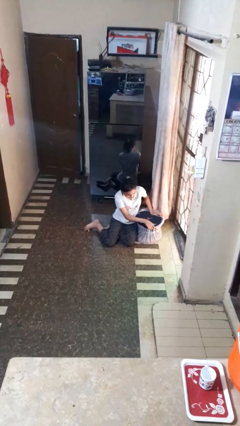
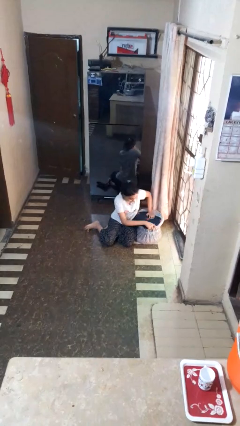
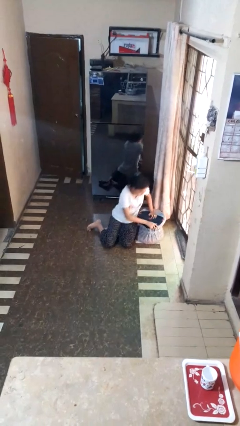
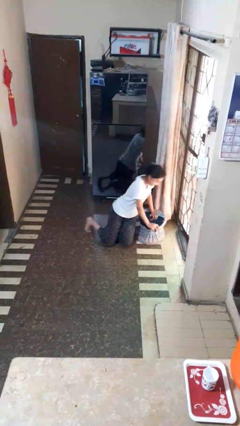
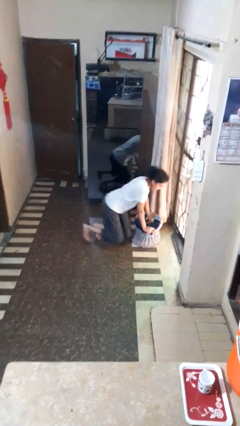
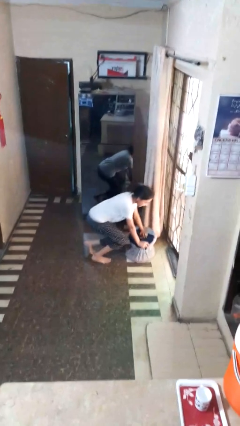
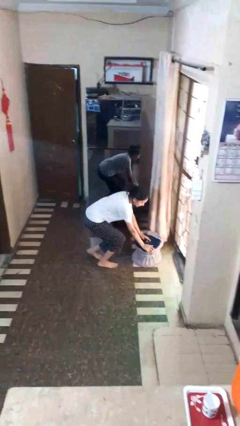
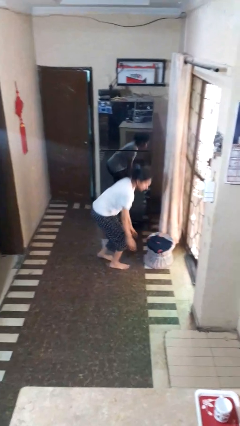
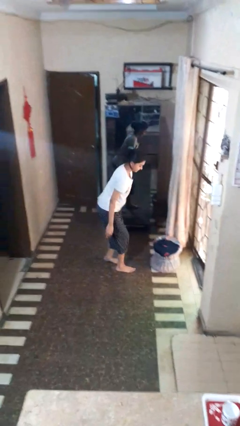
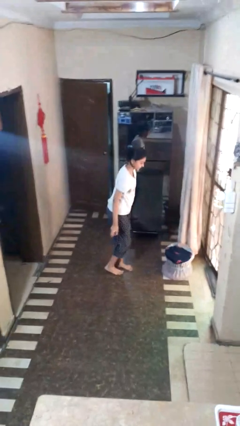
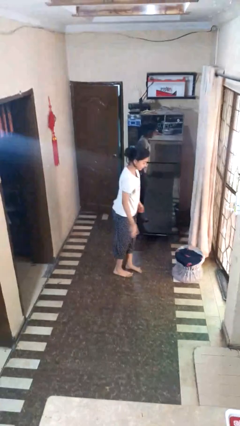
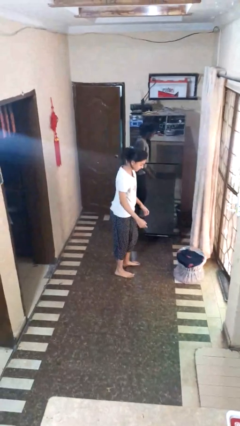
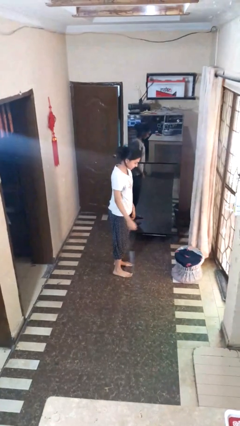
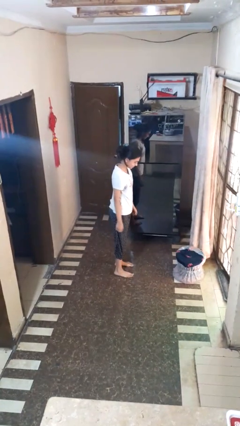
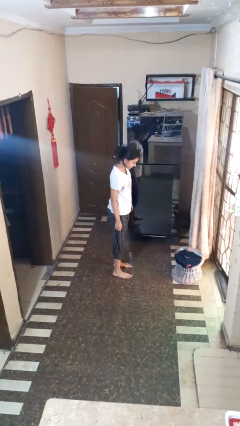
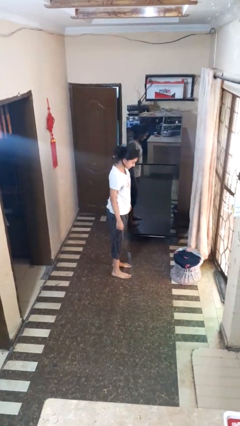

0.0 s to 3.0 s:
person stands up from floor

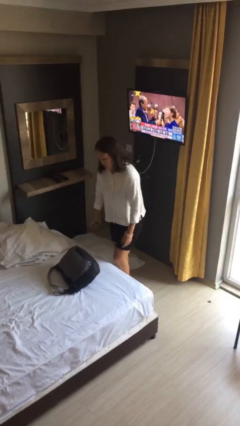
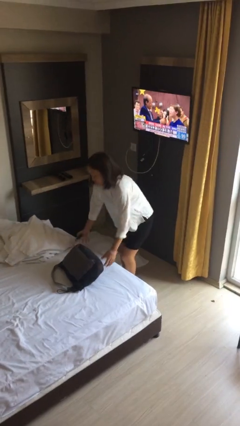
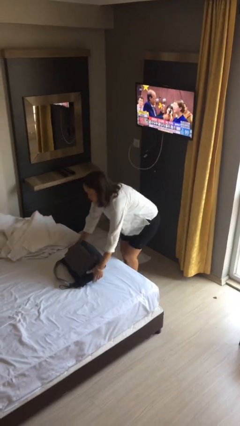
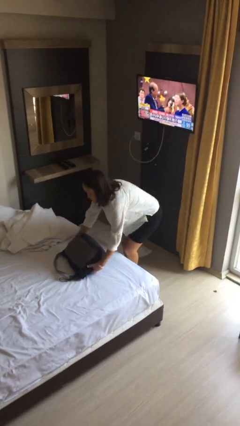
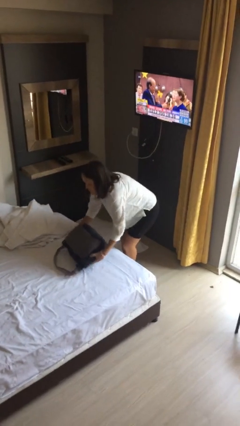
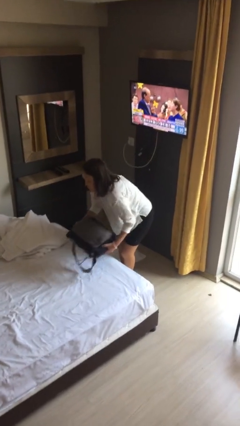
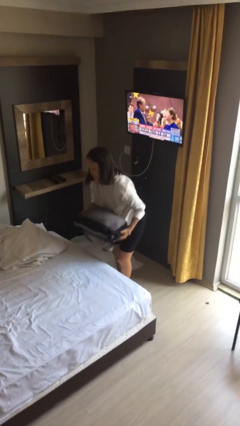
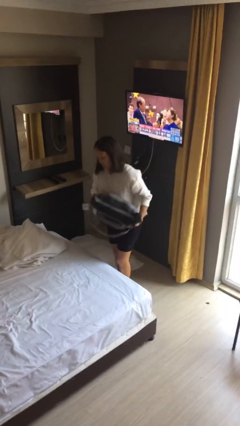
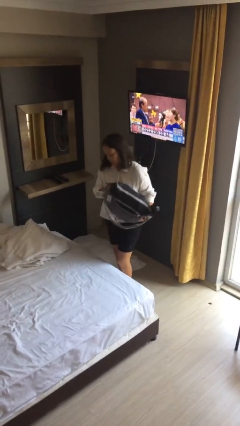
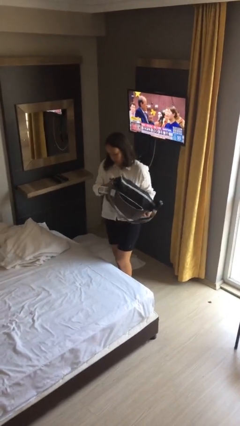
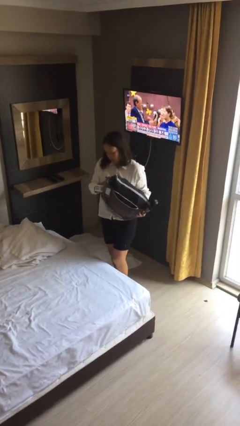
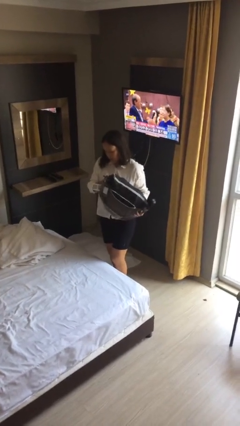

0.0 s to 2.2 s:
person picks up object from bed

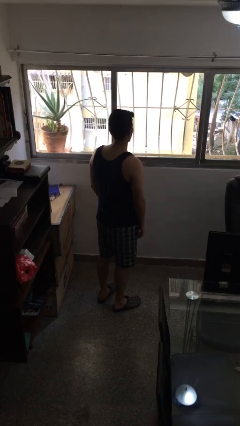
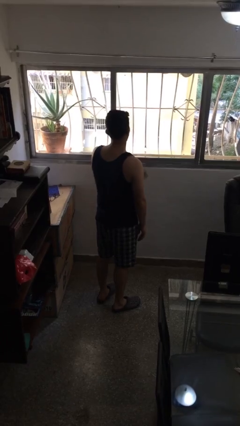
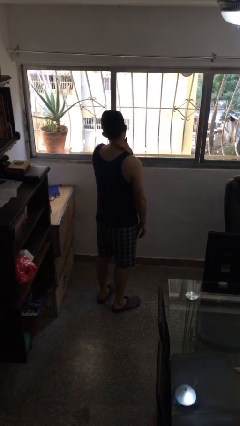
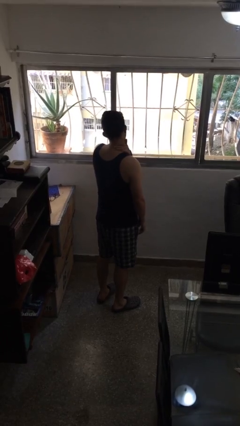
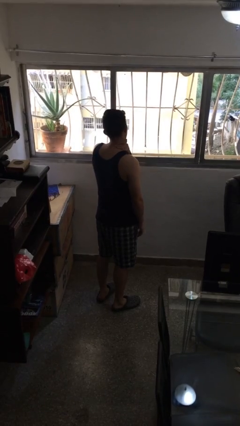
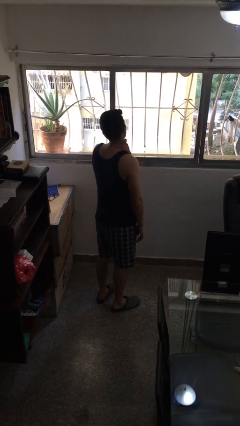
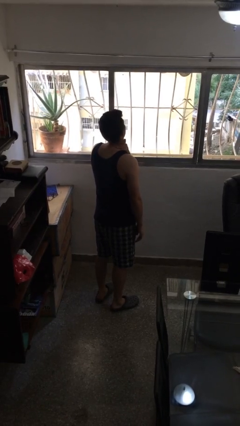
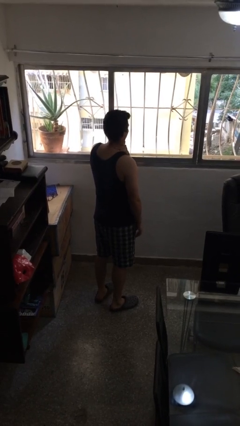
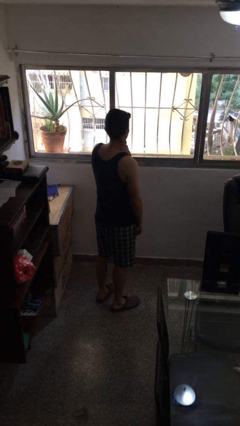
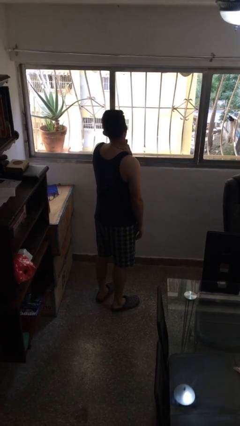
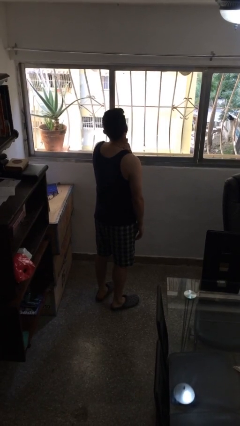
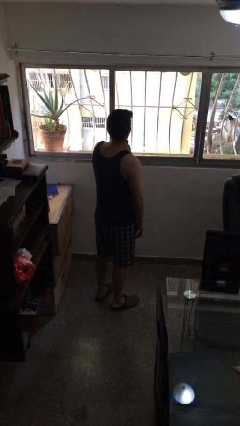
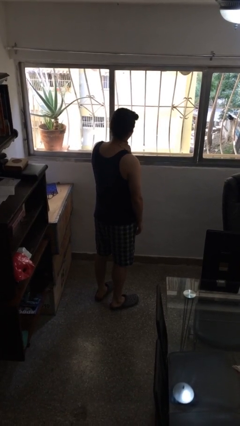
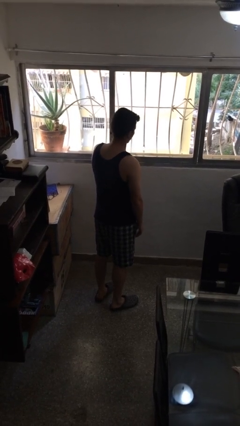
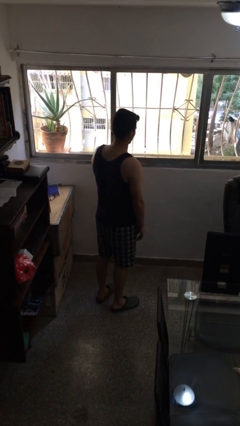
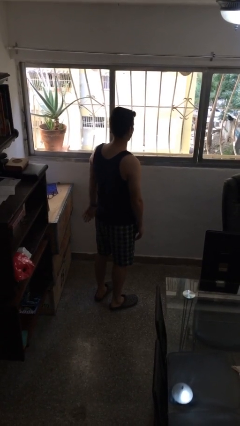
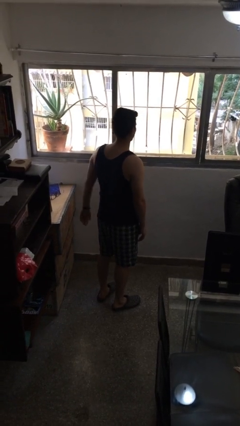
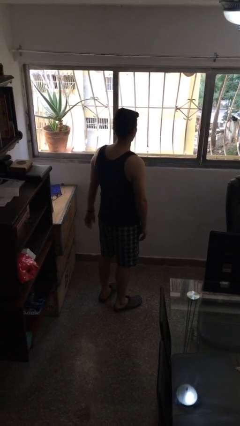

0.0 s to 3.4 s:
person rubs neck

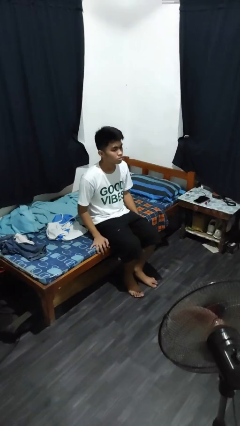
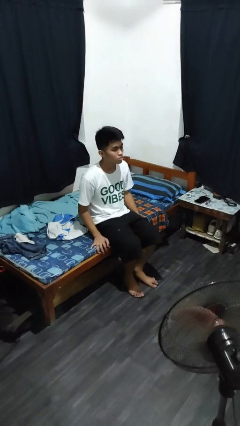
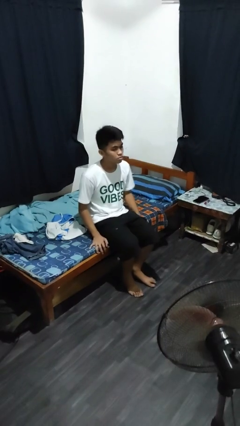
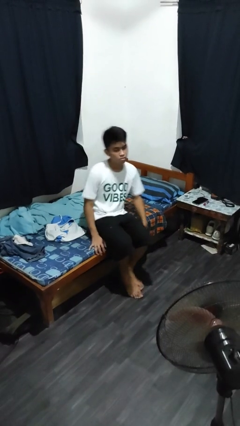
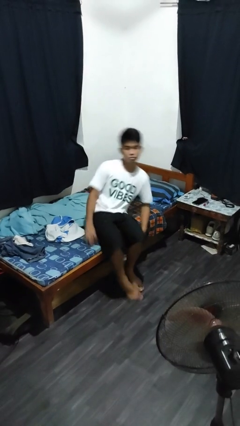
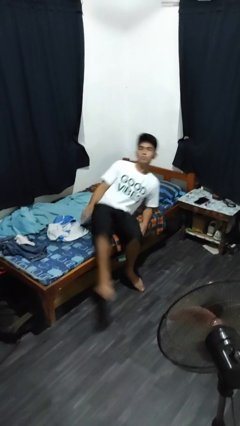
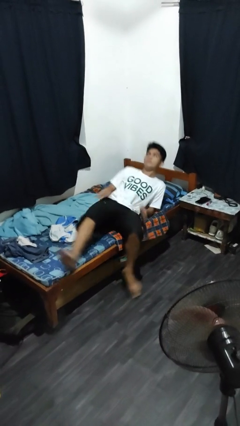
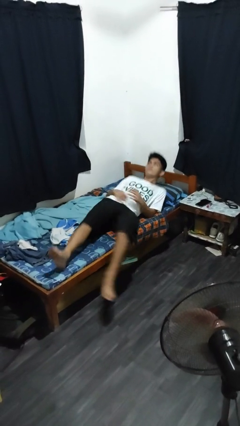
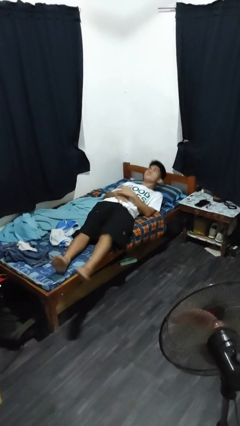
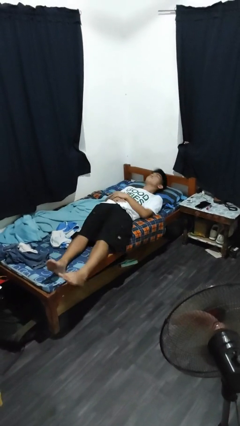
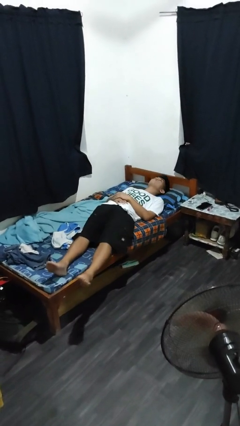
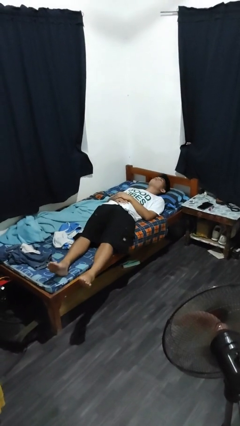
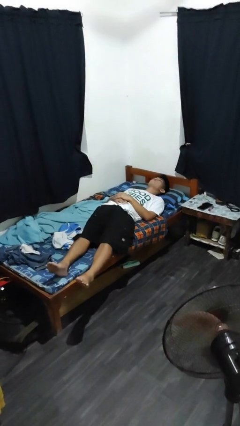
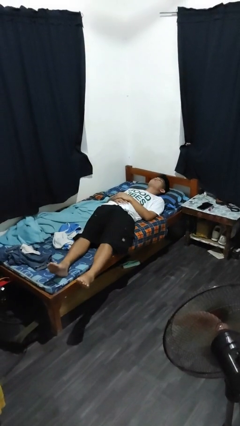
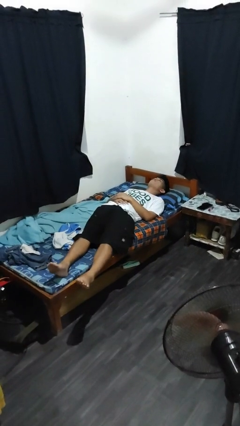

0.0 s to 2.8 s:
person lies down on bed

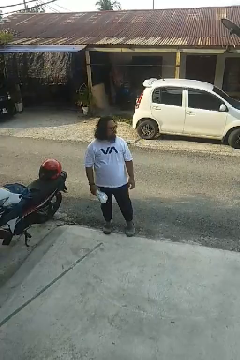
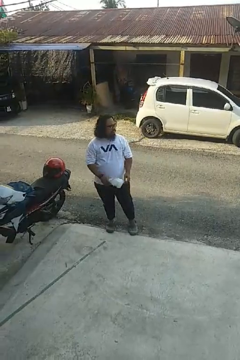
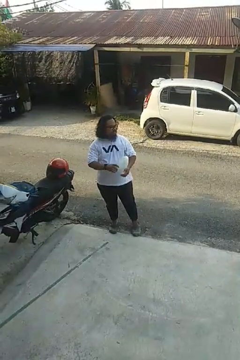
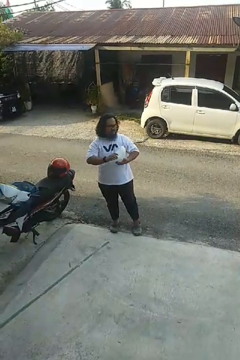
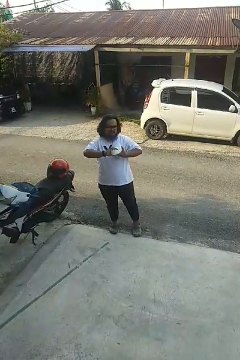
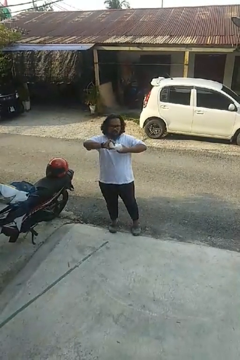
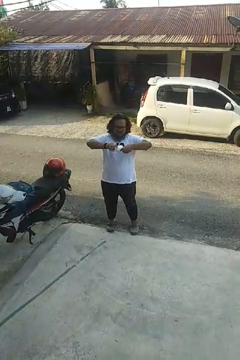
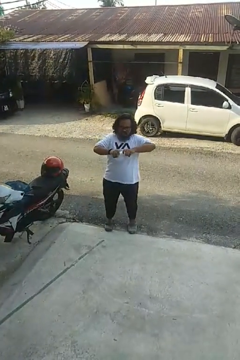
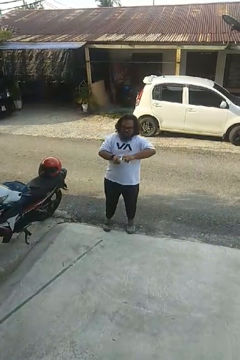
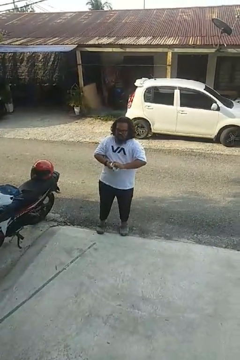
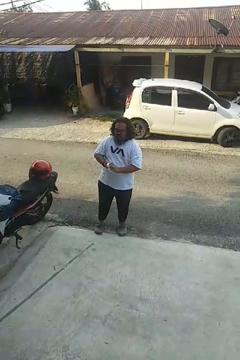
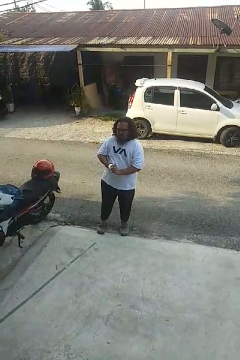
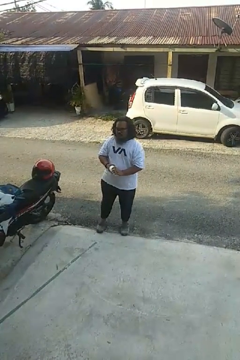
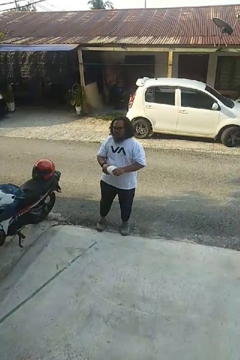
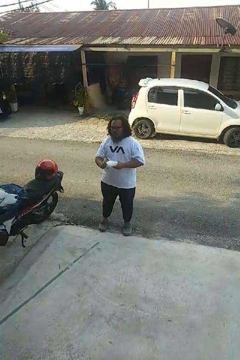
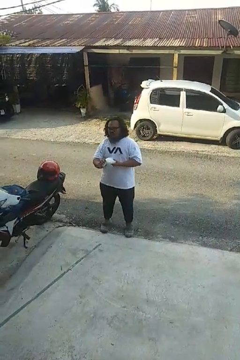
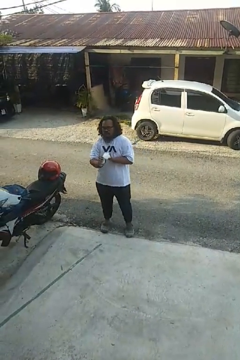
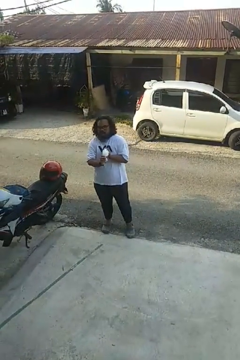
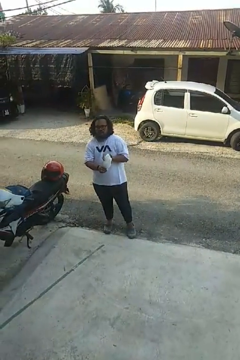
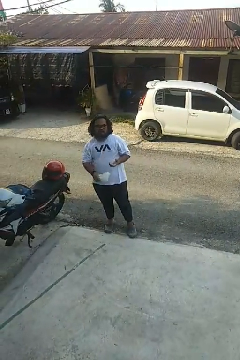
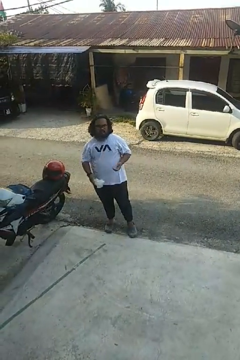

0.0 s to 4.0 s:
person squeezes object

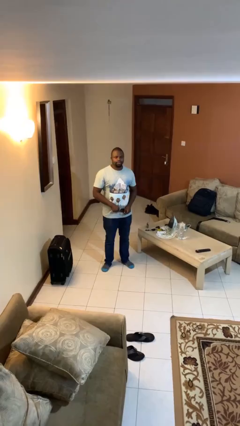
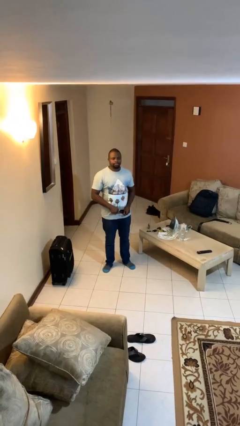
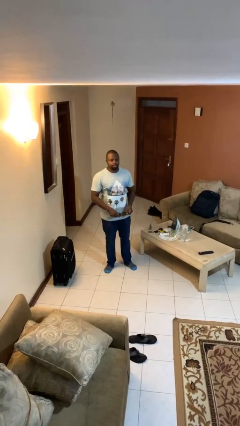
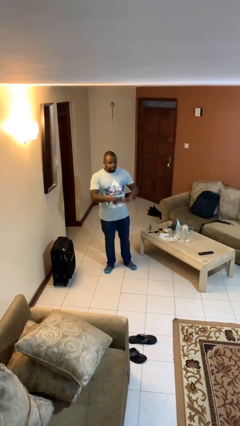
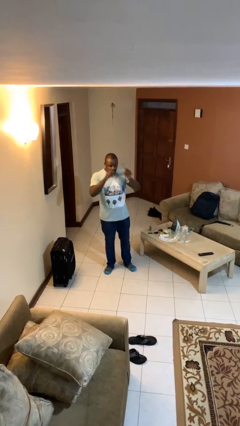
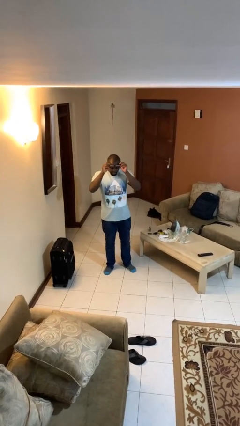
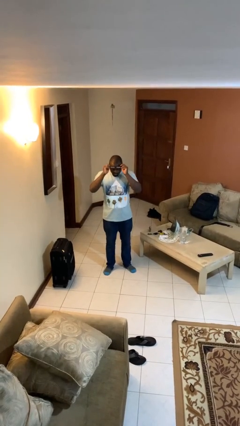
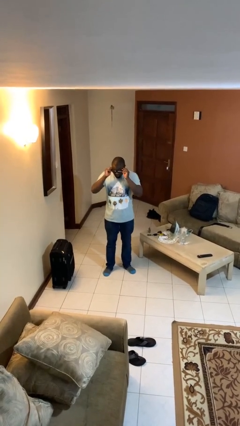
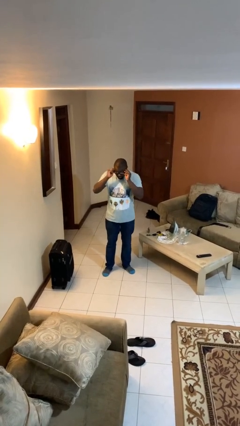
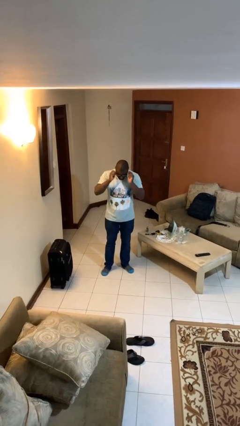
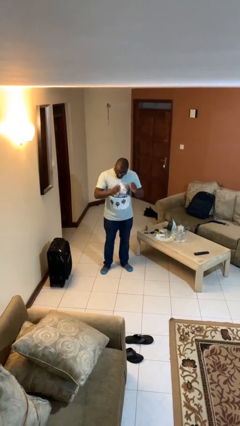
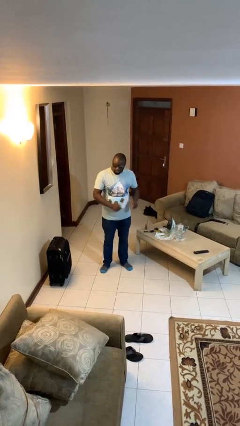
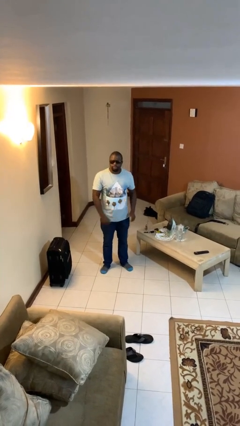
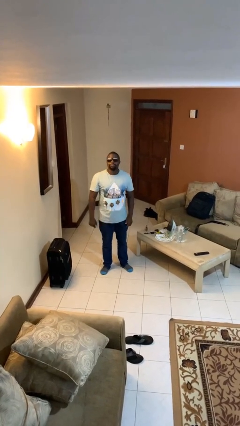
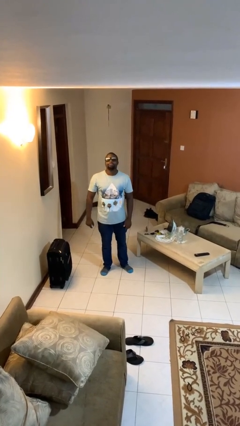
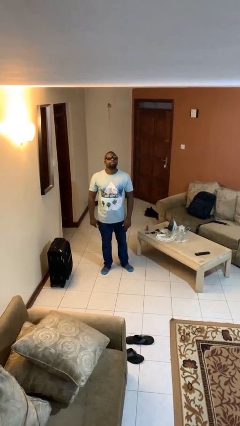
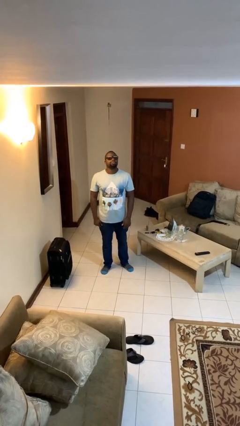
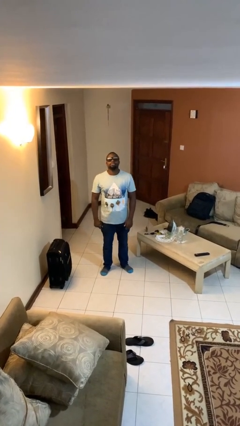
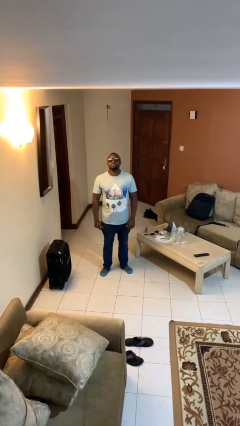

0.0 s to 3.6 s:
person puts on sunglasses
